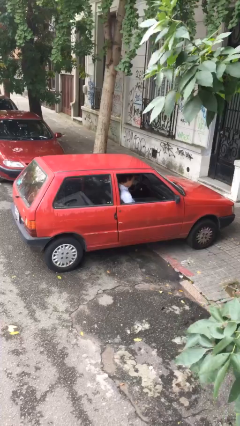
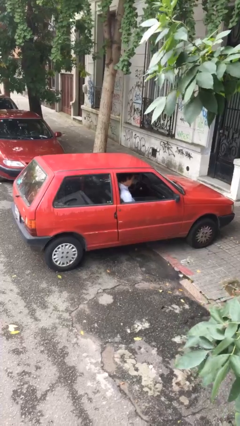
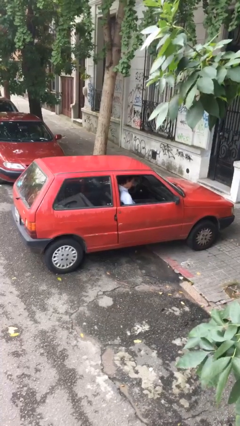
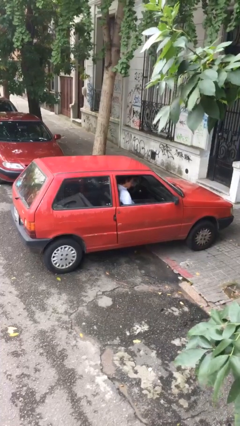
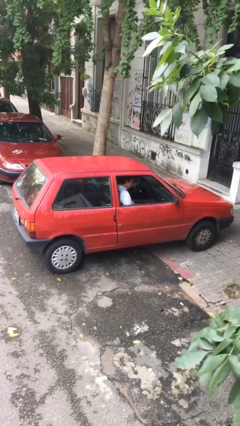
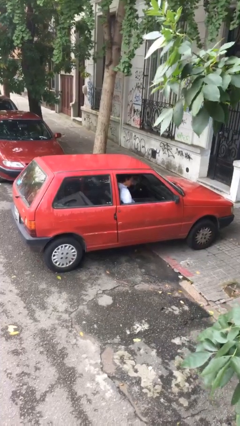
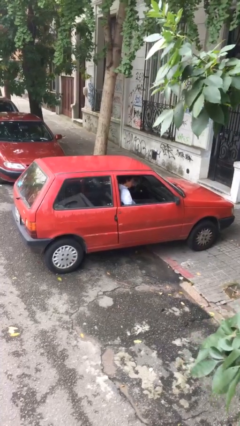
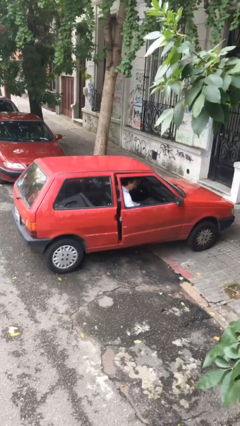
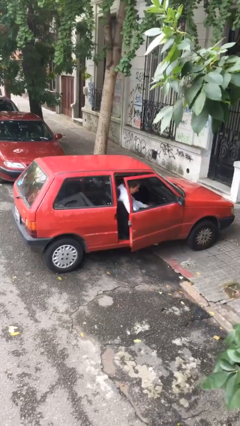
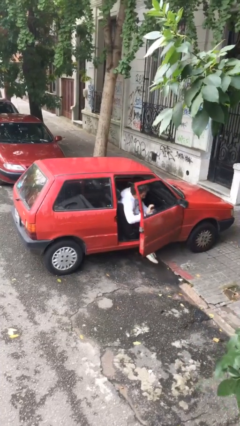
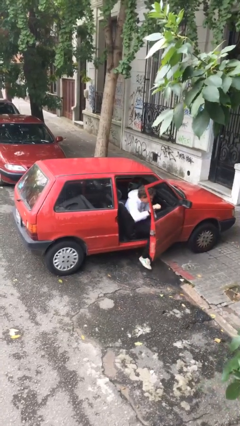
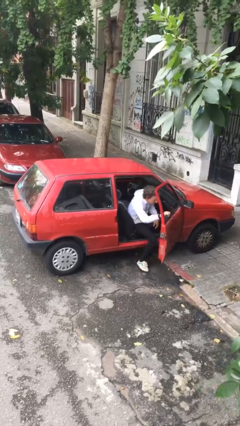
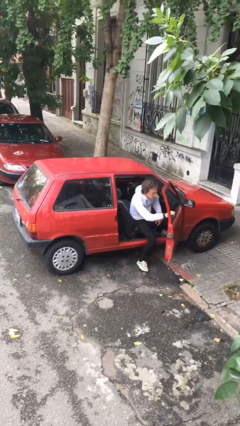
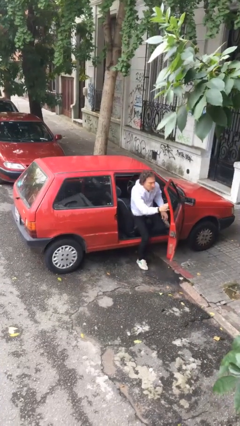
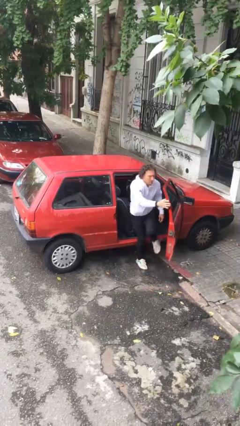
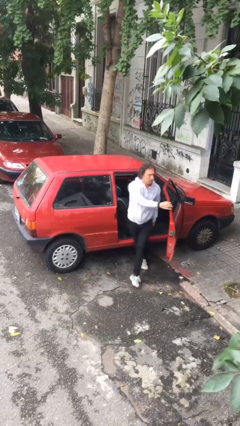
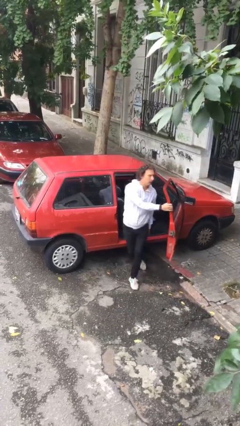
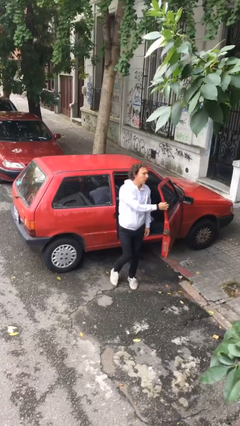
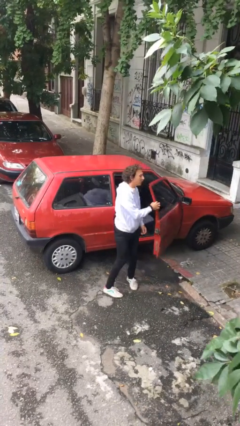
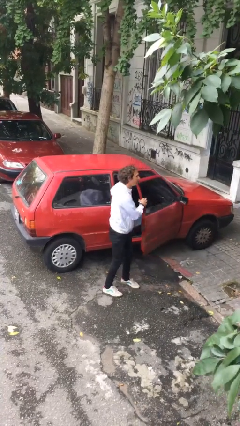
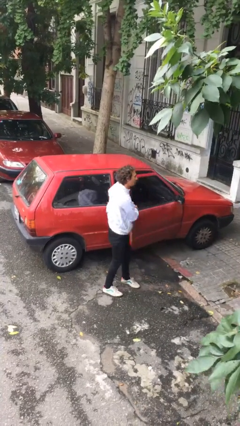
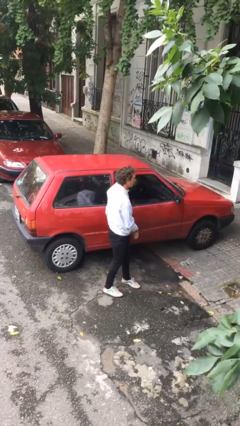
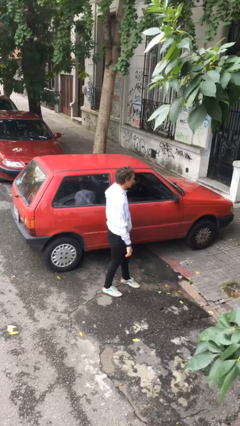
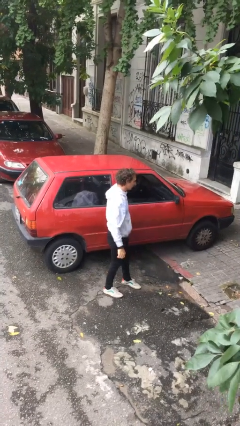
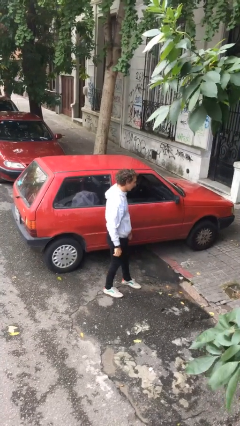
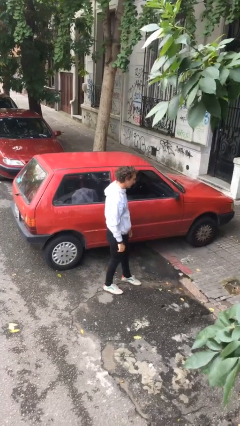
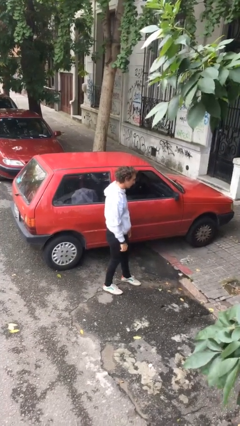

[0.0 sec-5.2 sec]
car drops off person

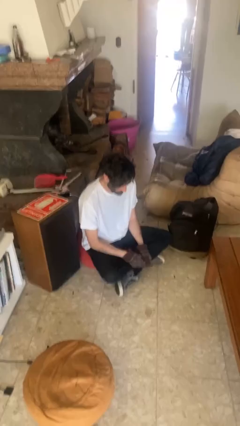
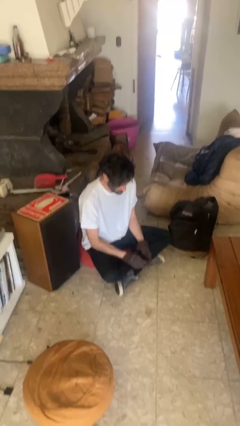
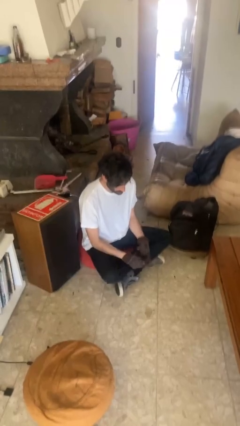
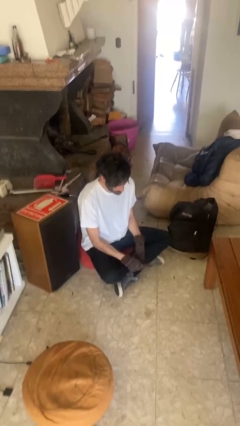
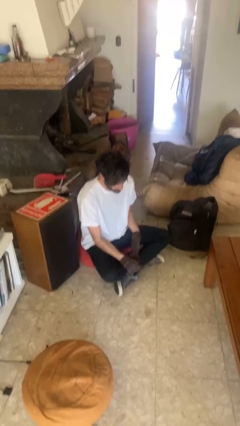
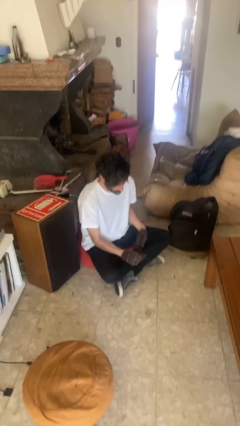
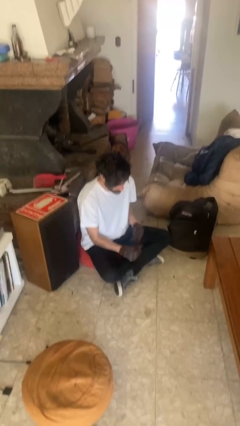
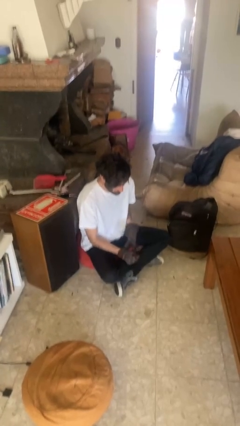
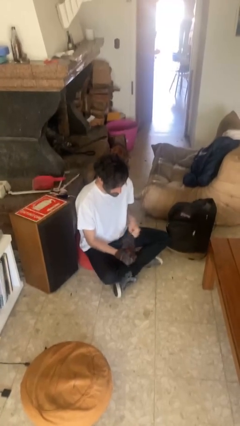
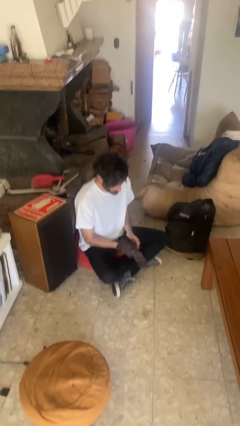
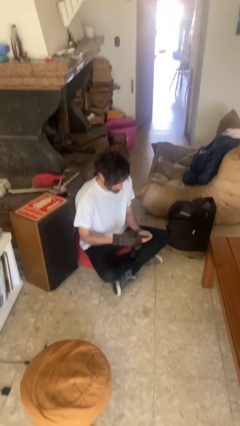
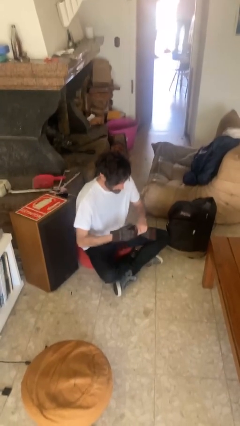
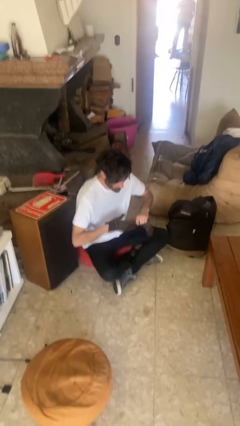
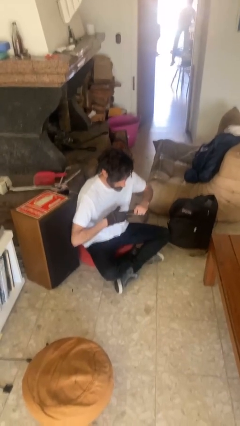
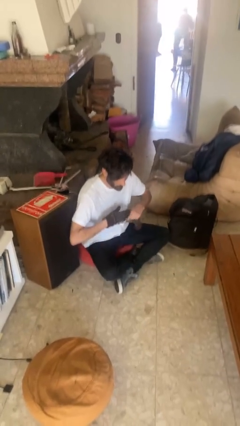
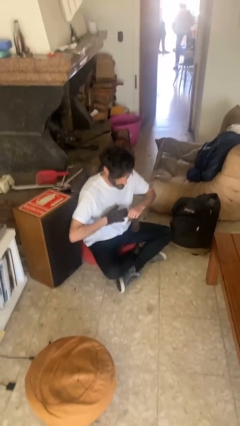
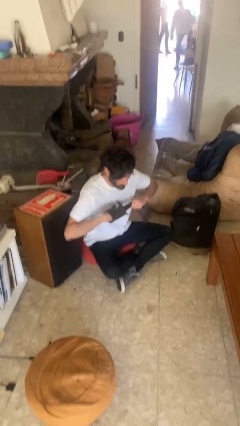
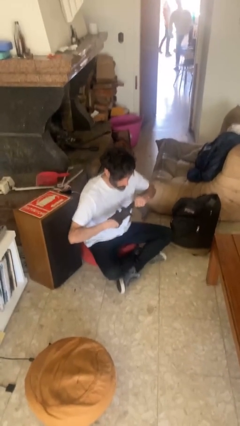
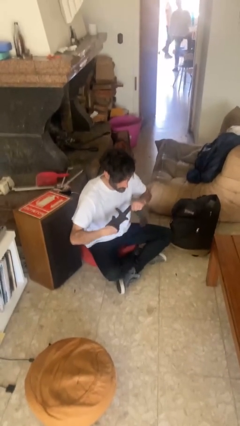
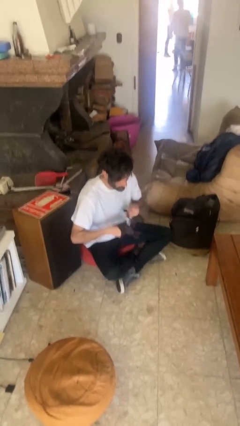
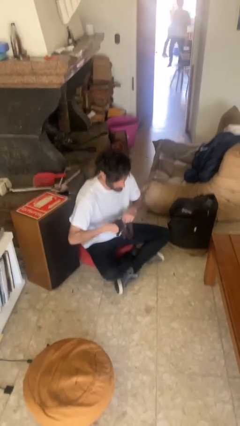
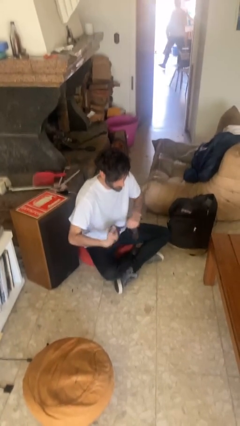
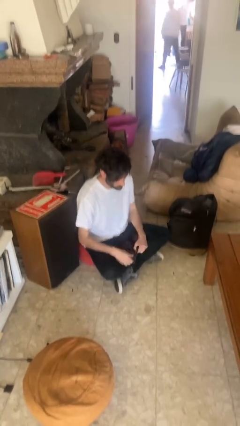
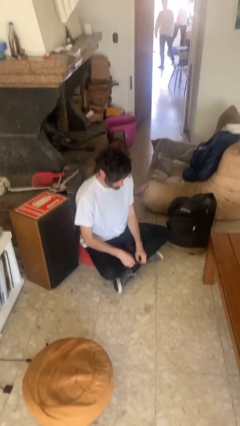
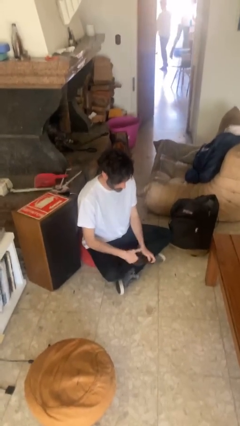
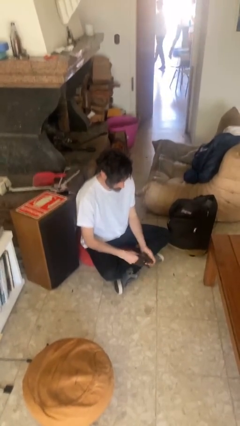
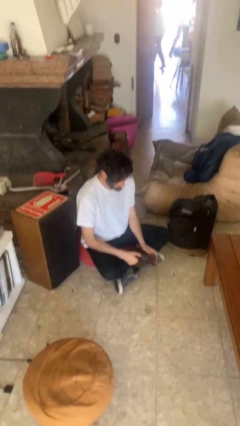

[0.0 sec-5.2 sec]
person takes off gloves

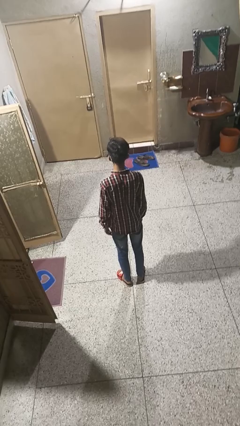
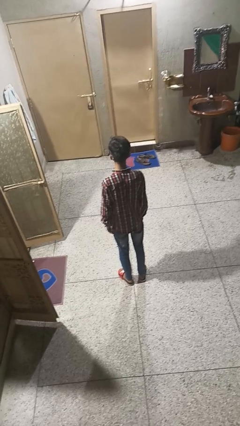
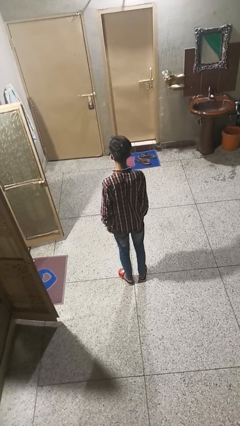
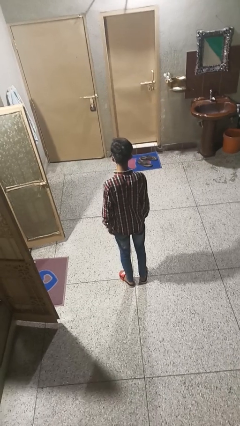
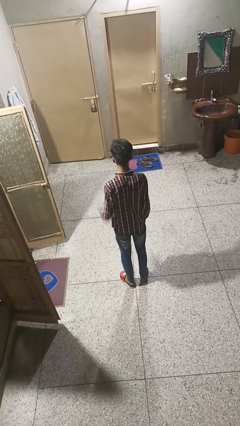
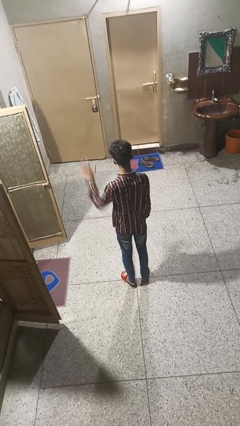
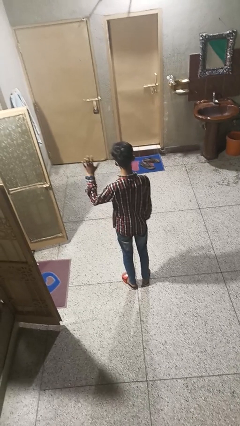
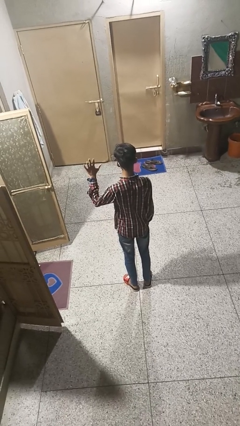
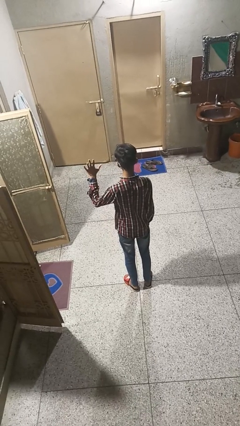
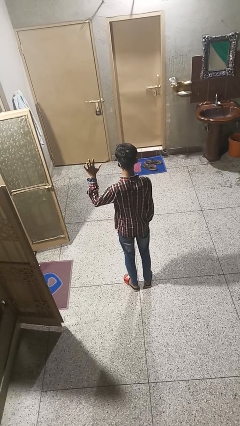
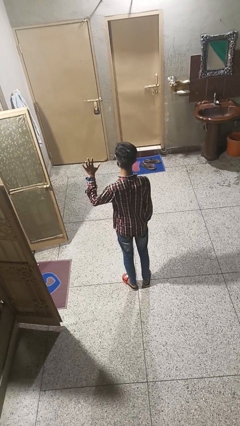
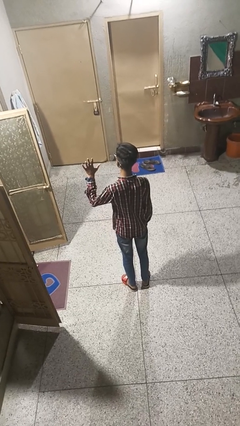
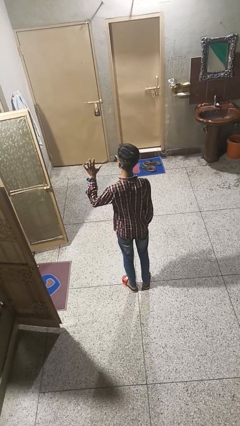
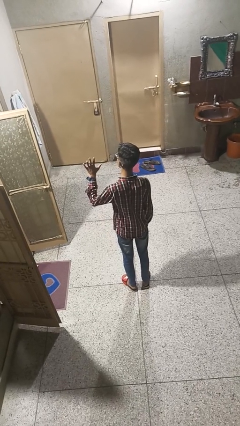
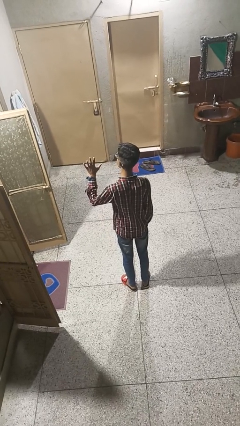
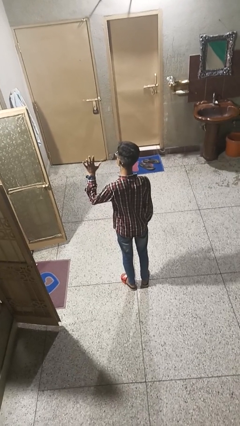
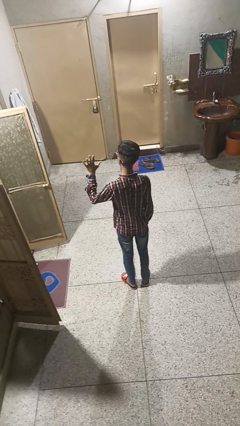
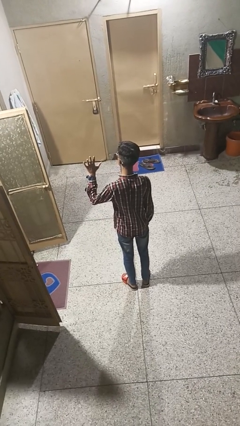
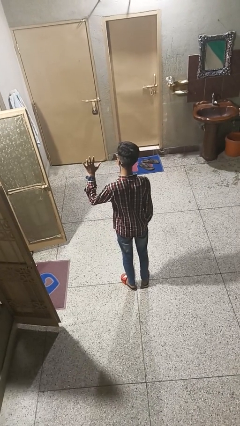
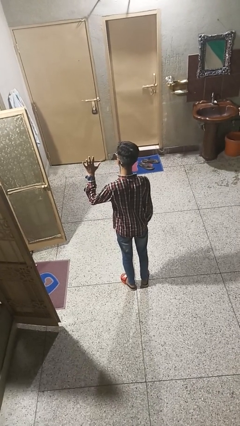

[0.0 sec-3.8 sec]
person gestures number five

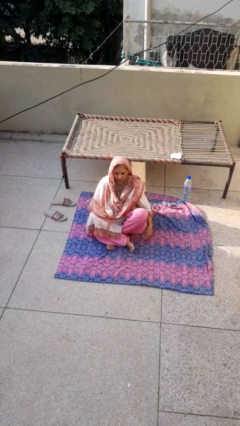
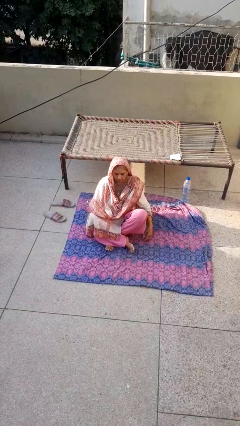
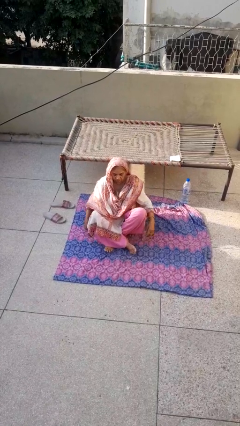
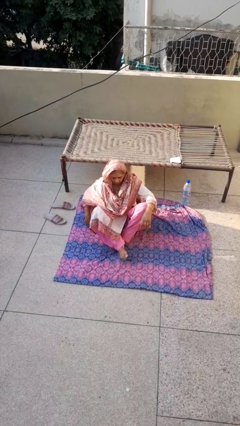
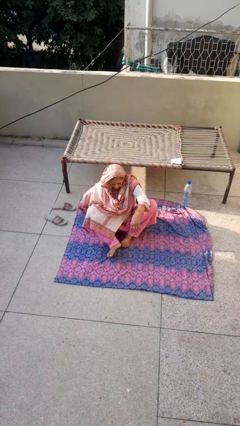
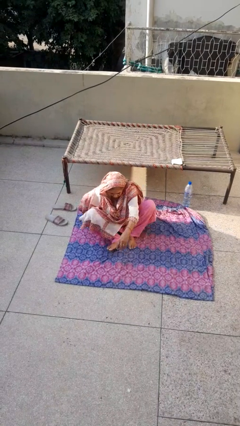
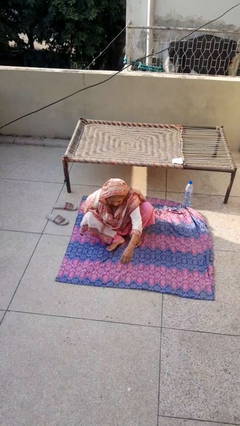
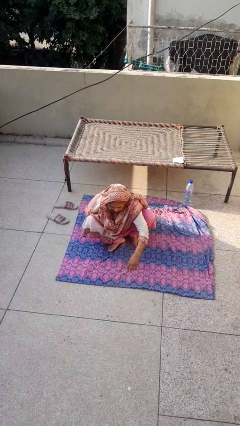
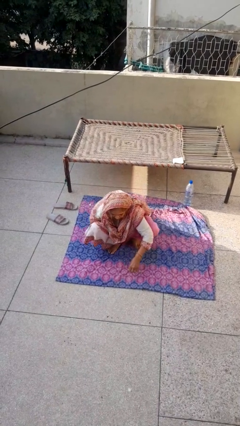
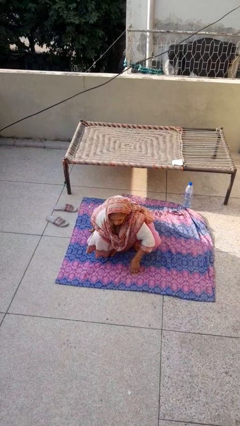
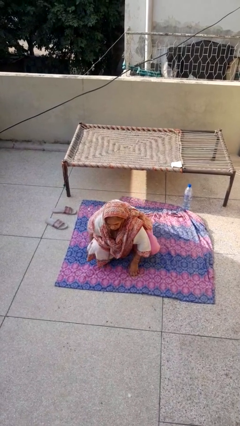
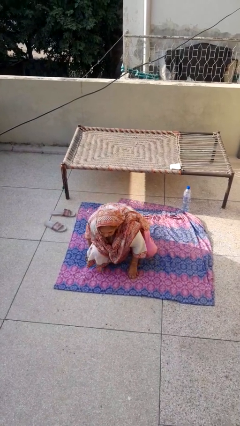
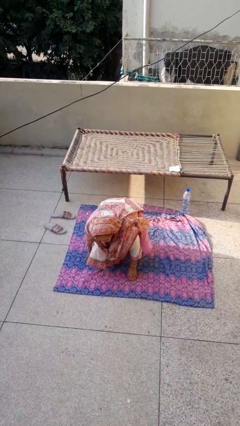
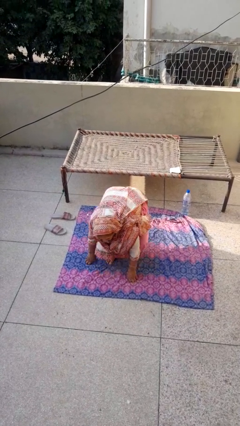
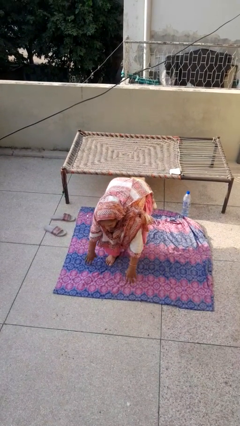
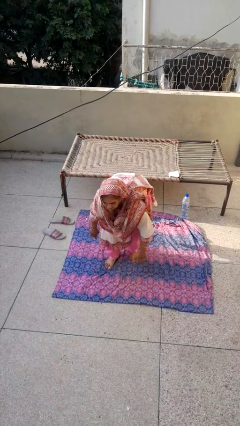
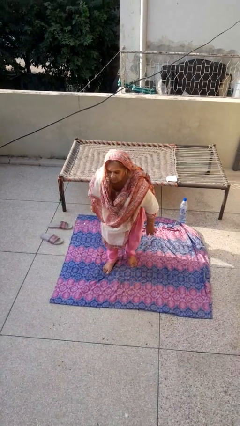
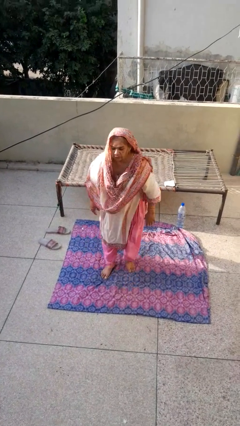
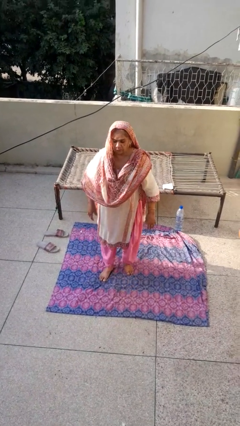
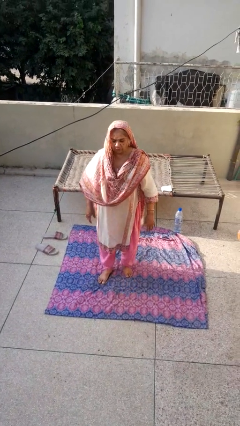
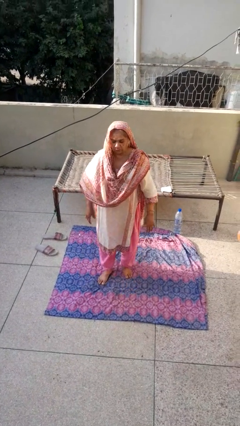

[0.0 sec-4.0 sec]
person stands up from floor
